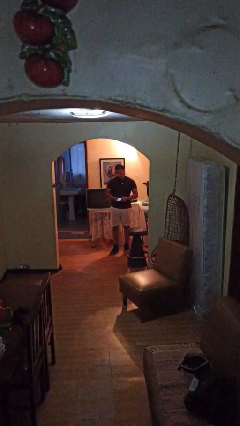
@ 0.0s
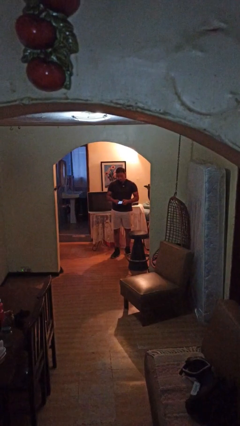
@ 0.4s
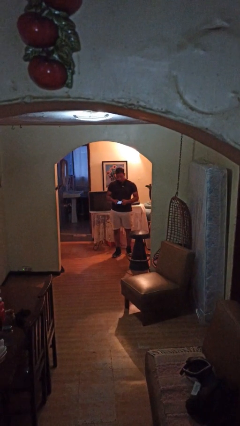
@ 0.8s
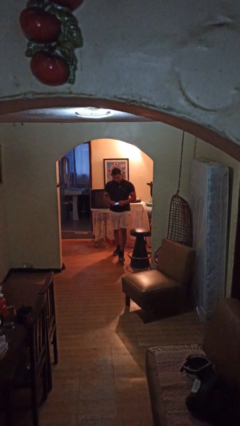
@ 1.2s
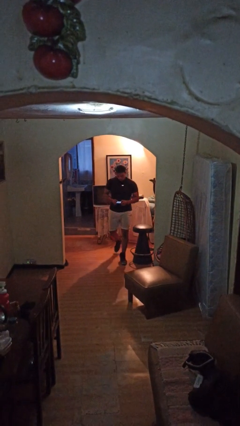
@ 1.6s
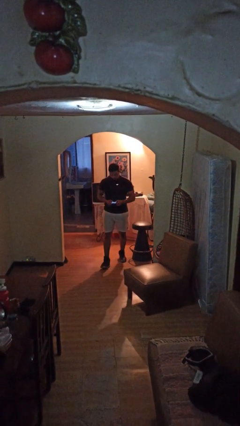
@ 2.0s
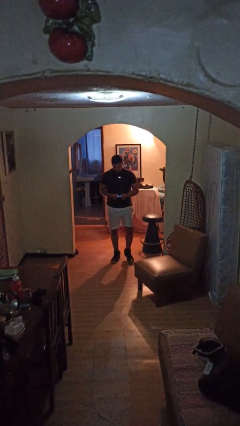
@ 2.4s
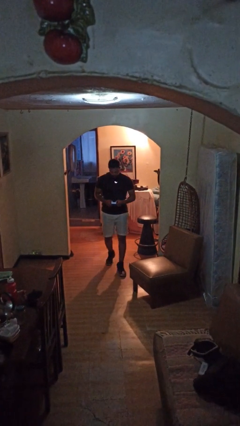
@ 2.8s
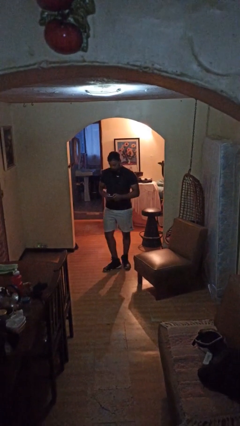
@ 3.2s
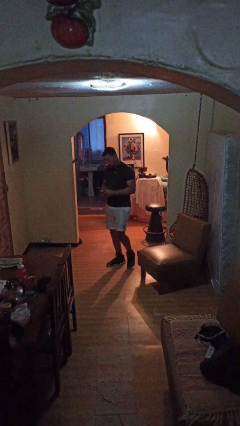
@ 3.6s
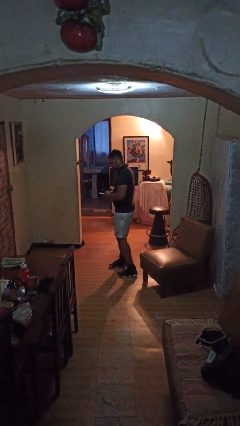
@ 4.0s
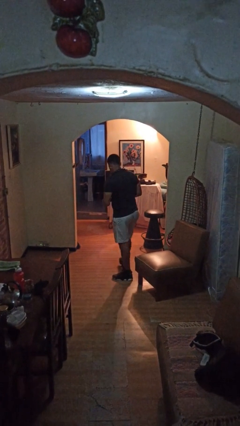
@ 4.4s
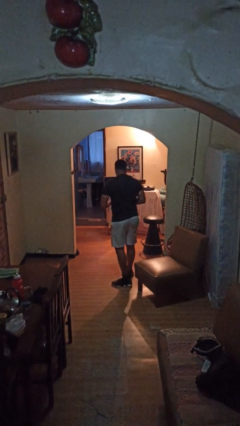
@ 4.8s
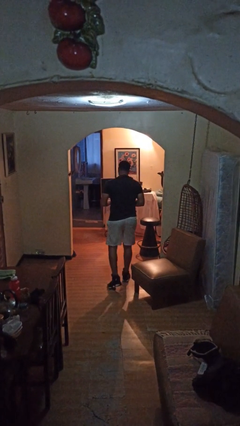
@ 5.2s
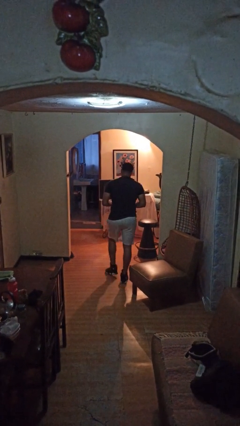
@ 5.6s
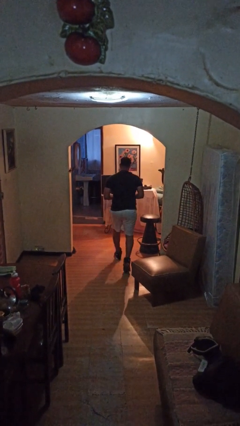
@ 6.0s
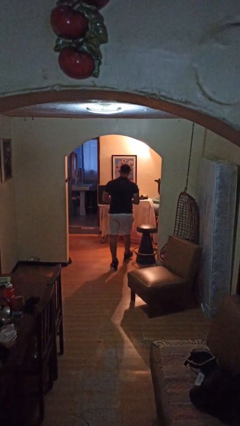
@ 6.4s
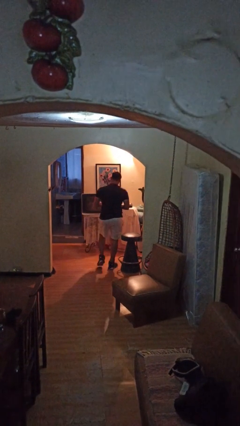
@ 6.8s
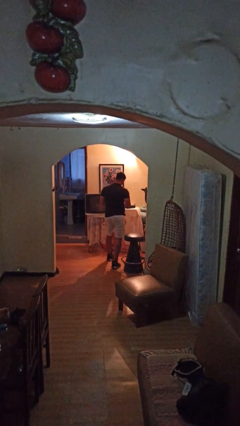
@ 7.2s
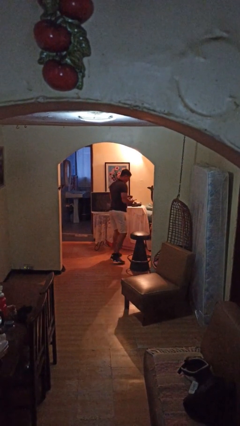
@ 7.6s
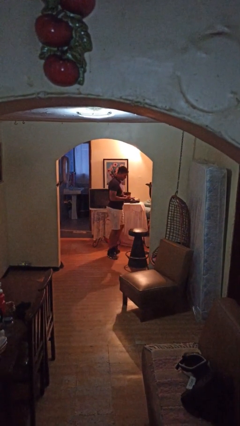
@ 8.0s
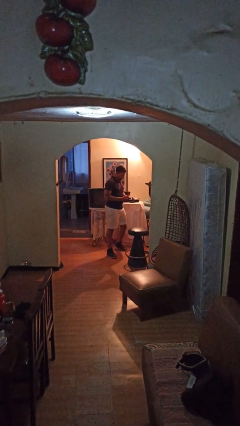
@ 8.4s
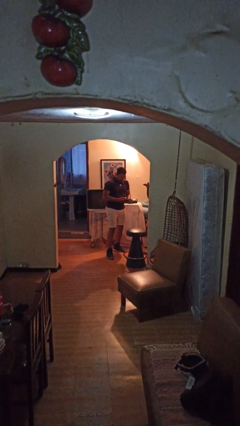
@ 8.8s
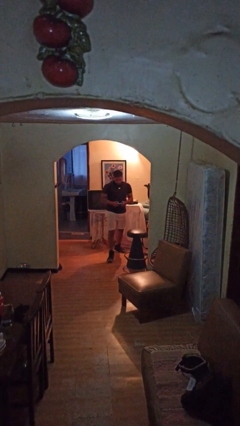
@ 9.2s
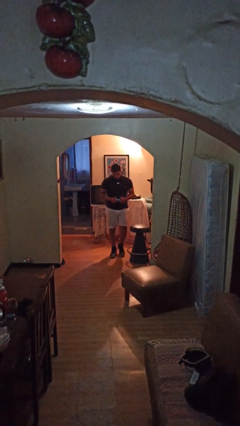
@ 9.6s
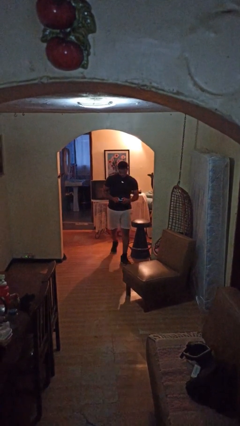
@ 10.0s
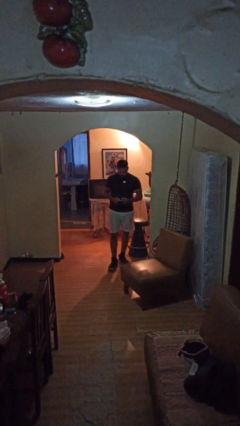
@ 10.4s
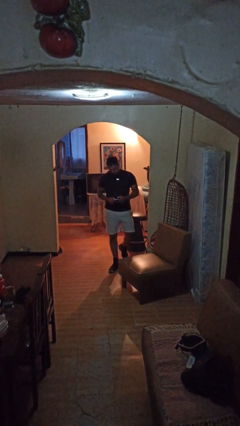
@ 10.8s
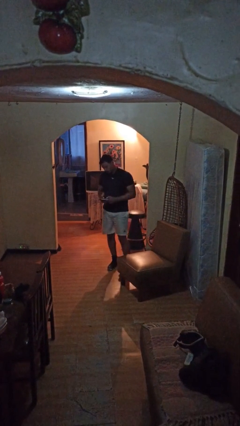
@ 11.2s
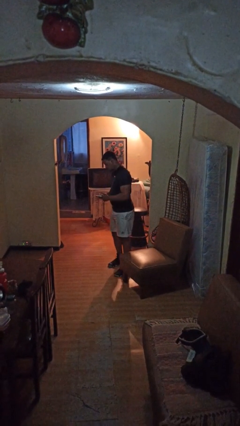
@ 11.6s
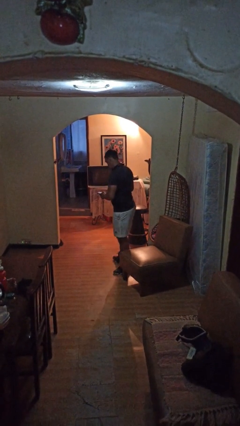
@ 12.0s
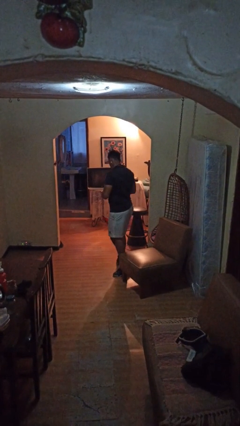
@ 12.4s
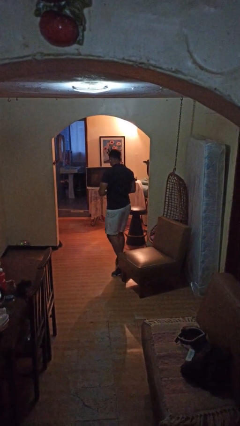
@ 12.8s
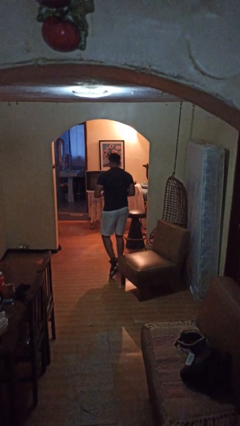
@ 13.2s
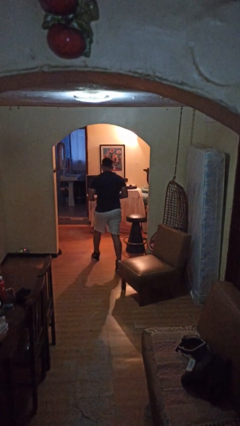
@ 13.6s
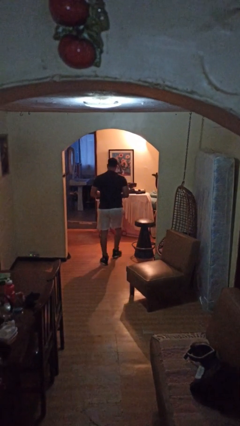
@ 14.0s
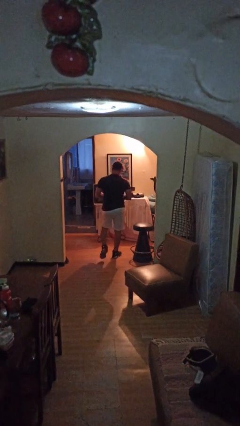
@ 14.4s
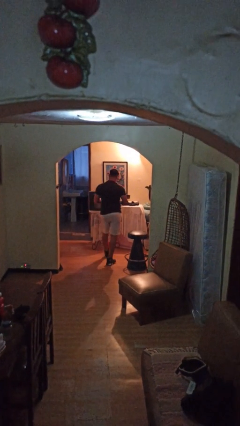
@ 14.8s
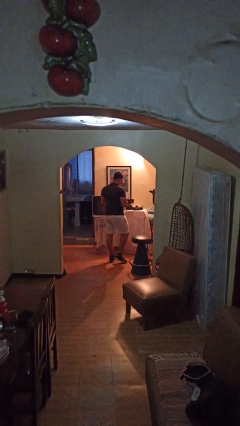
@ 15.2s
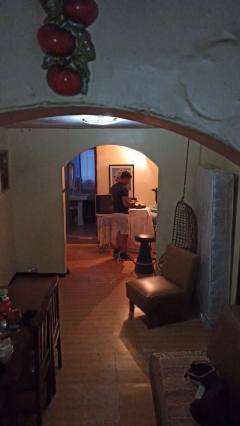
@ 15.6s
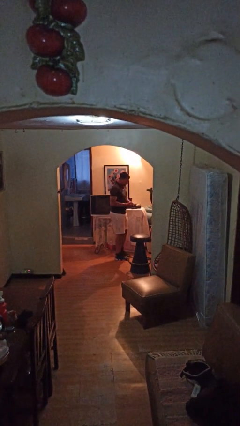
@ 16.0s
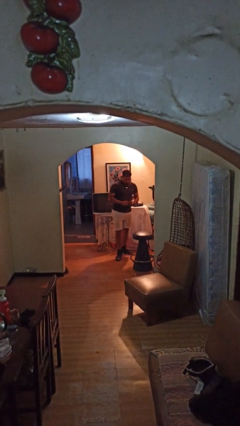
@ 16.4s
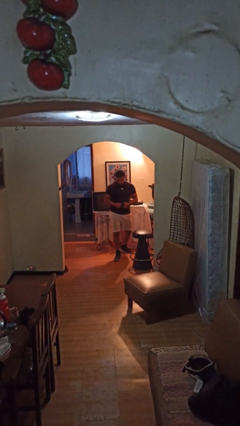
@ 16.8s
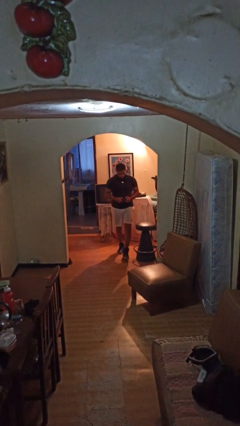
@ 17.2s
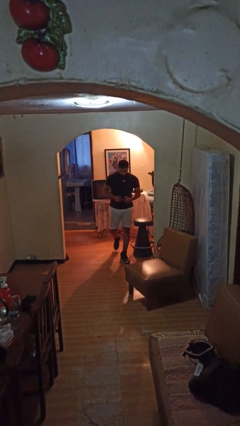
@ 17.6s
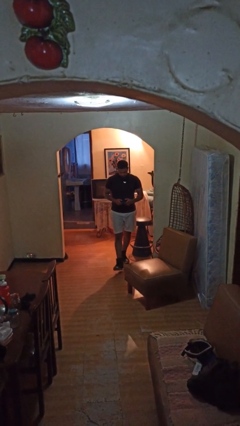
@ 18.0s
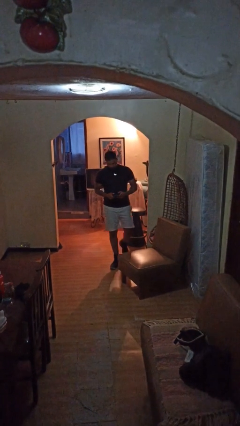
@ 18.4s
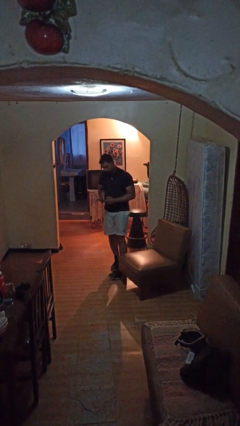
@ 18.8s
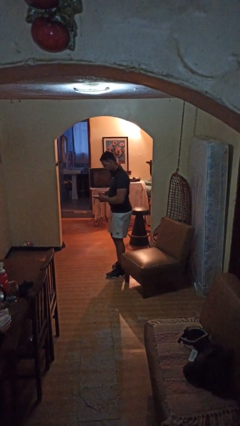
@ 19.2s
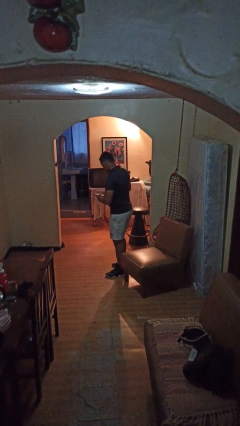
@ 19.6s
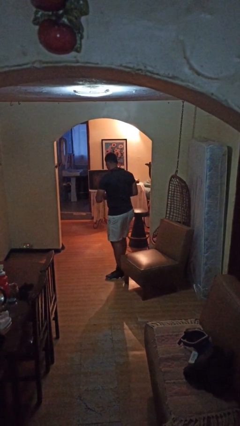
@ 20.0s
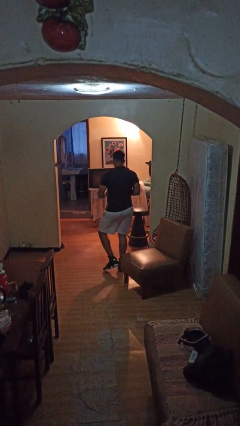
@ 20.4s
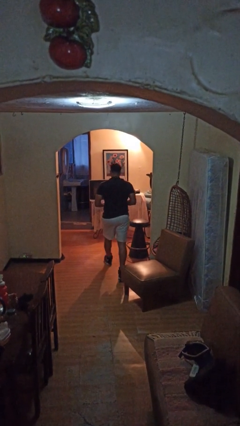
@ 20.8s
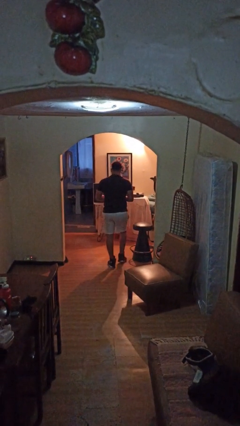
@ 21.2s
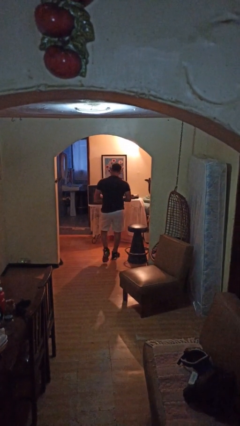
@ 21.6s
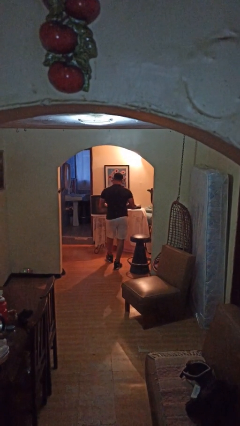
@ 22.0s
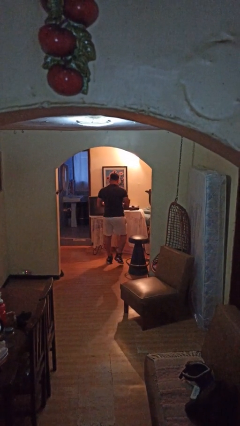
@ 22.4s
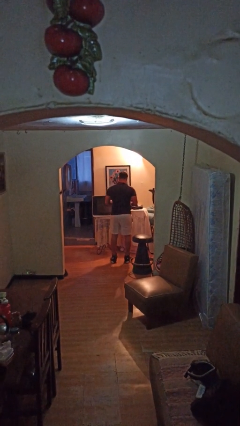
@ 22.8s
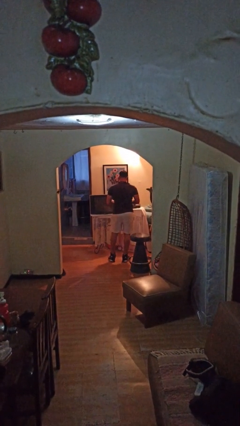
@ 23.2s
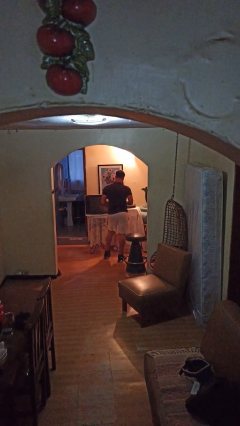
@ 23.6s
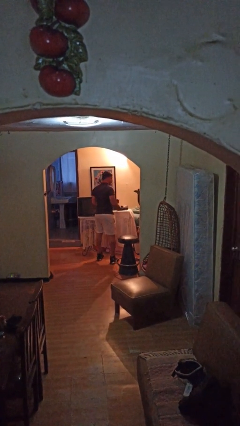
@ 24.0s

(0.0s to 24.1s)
person texts on phone

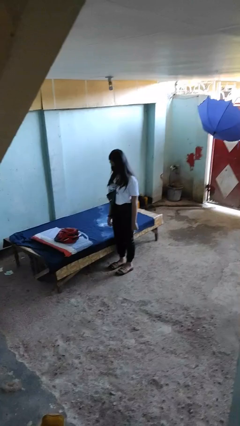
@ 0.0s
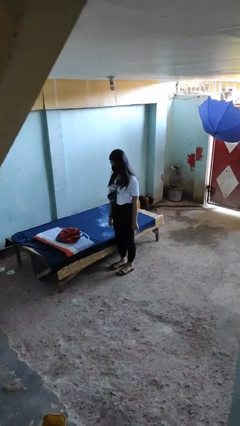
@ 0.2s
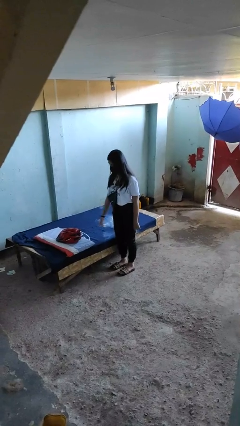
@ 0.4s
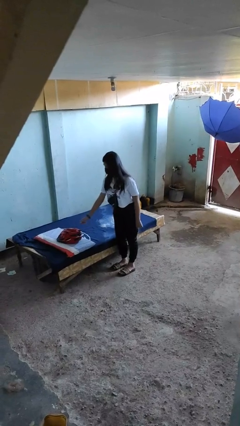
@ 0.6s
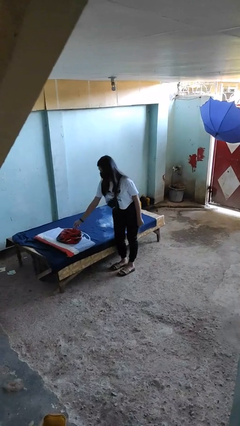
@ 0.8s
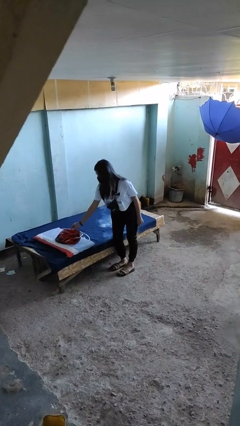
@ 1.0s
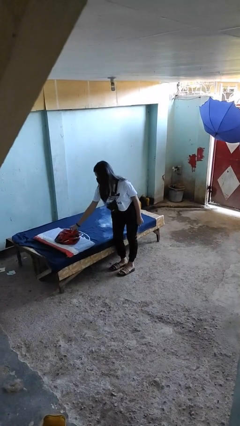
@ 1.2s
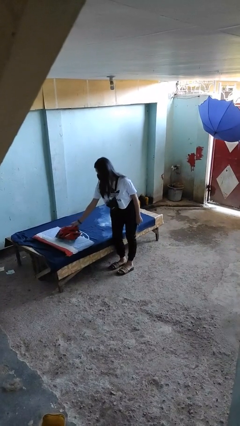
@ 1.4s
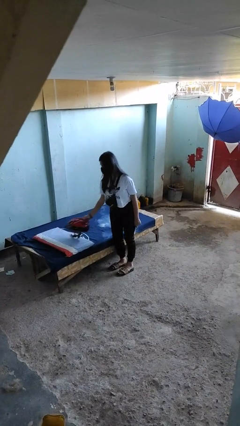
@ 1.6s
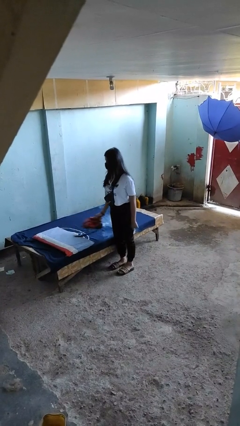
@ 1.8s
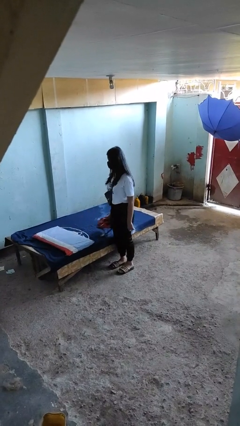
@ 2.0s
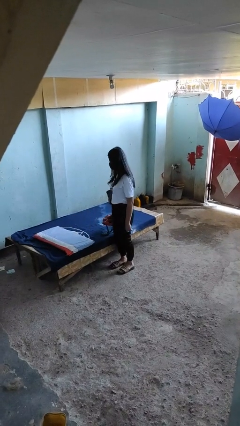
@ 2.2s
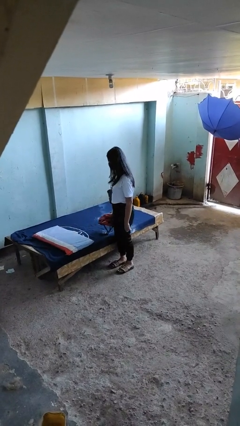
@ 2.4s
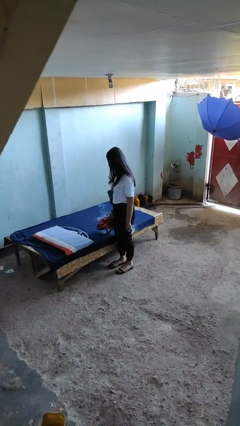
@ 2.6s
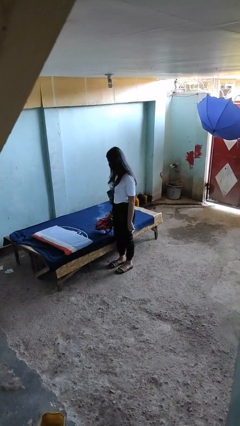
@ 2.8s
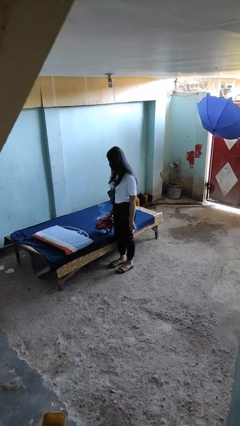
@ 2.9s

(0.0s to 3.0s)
person picks up object from bed

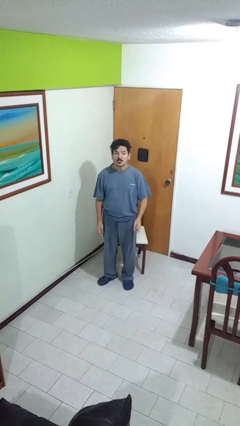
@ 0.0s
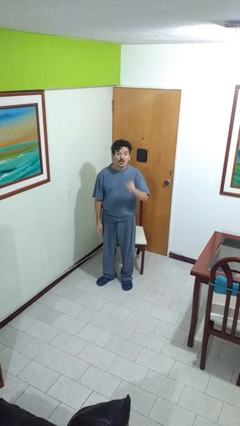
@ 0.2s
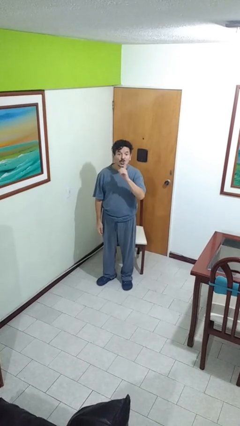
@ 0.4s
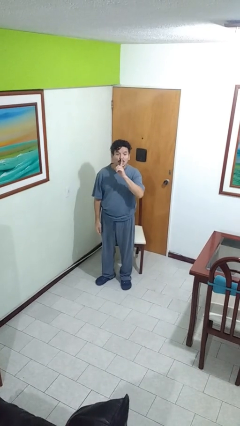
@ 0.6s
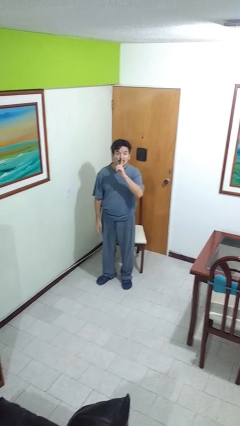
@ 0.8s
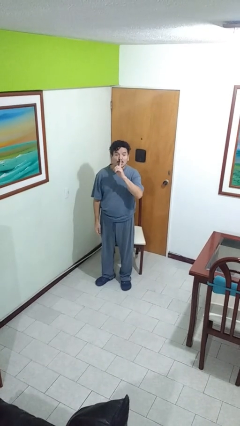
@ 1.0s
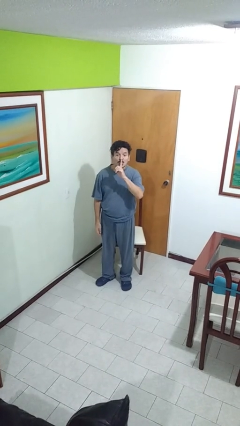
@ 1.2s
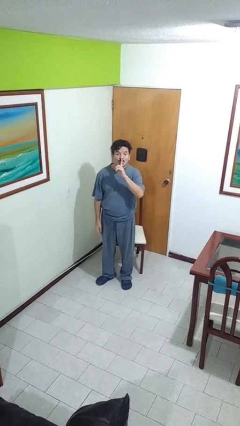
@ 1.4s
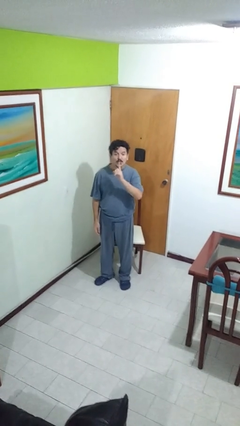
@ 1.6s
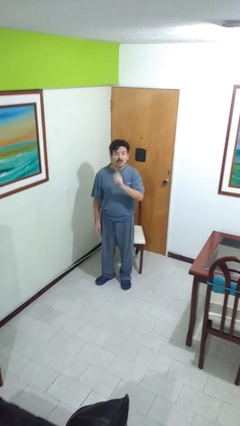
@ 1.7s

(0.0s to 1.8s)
person gestures be quiet

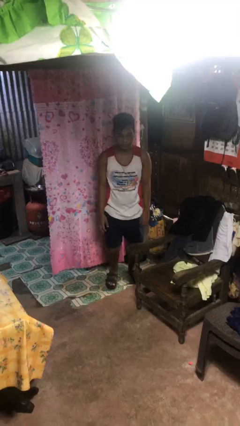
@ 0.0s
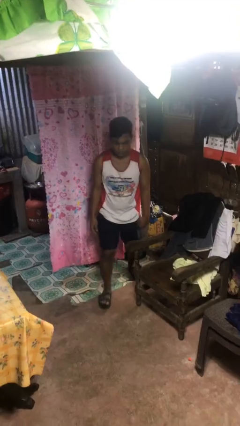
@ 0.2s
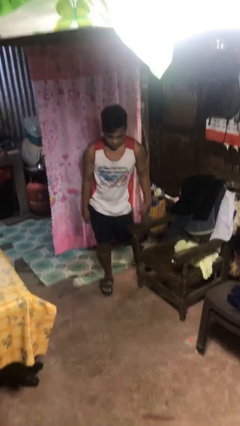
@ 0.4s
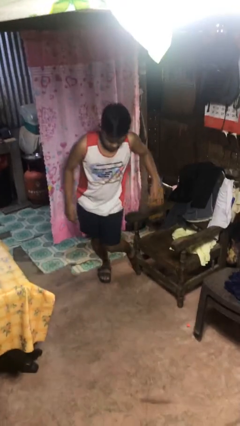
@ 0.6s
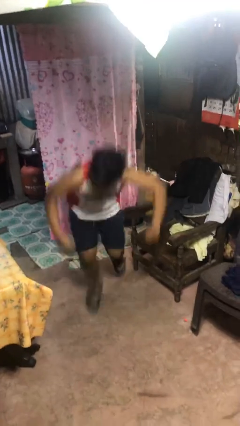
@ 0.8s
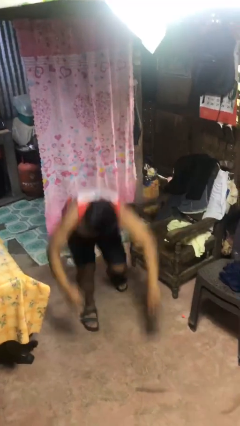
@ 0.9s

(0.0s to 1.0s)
person trips on object on floor

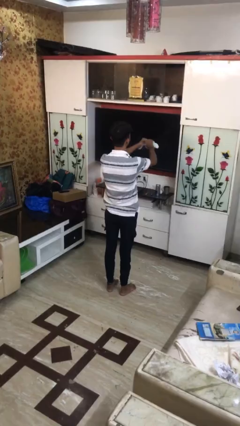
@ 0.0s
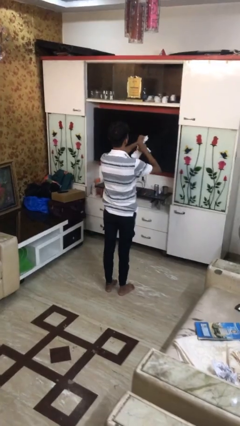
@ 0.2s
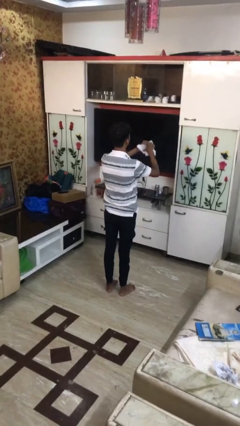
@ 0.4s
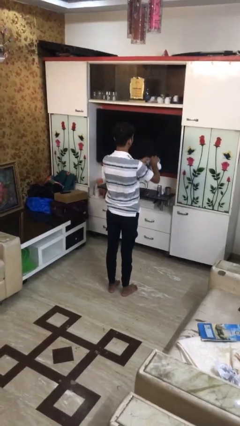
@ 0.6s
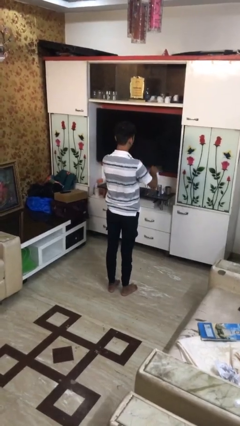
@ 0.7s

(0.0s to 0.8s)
person tears paper
